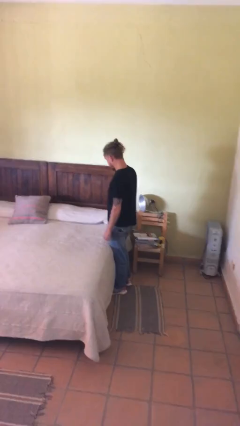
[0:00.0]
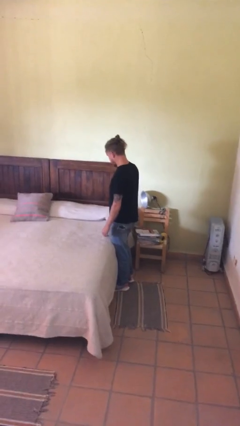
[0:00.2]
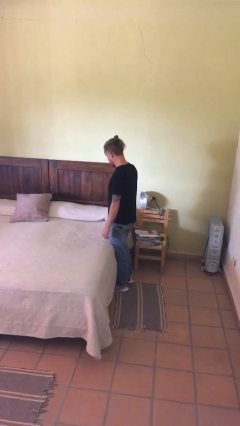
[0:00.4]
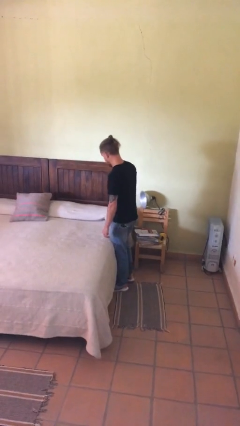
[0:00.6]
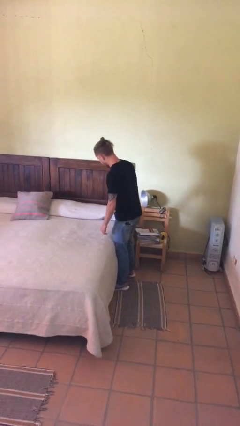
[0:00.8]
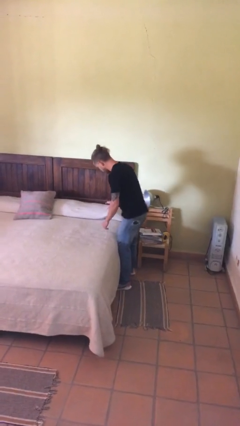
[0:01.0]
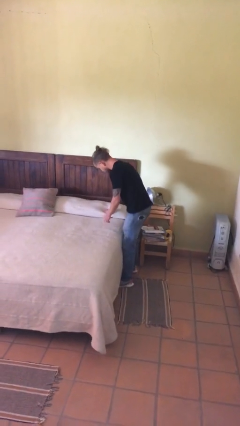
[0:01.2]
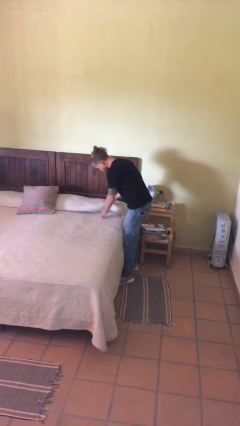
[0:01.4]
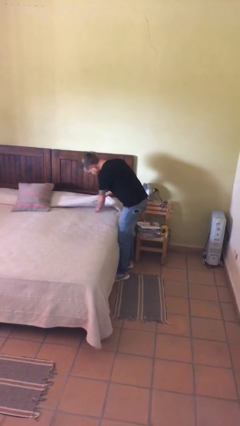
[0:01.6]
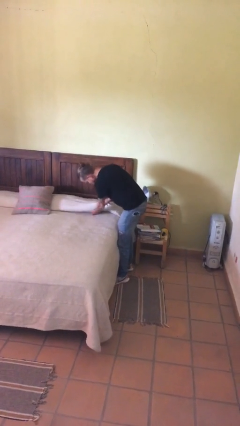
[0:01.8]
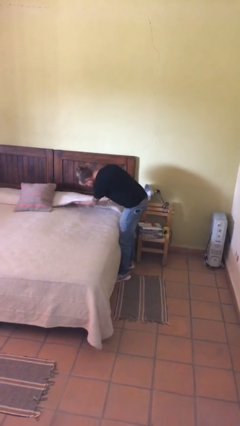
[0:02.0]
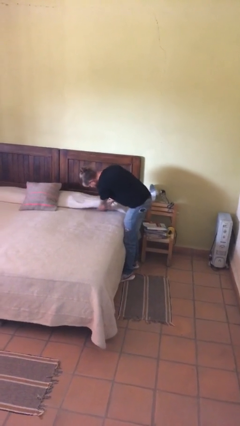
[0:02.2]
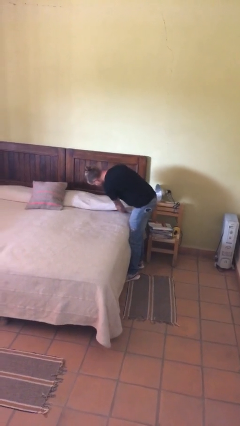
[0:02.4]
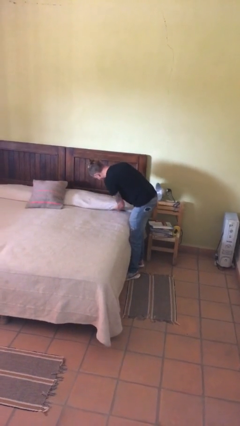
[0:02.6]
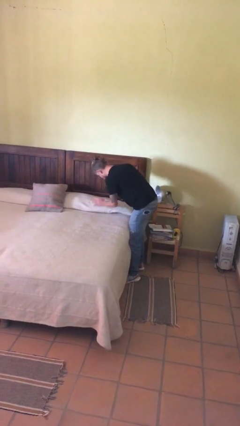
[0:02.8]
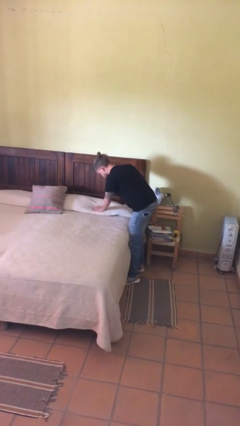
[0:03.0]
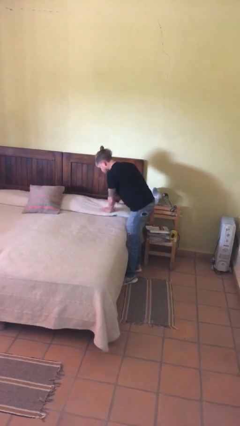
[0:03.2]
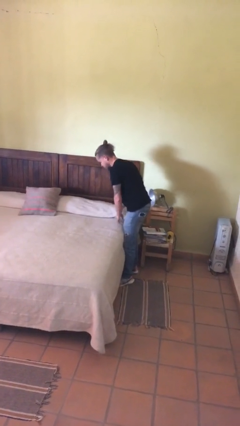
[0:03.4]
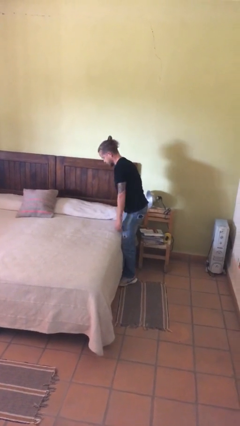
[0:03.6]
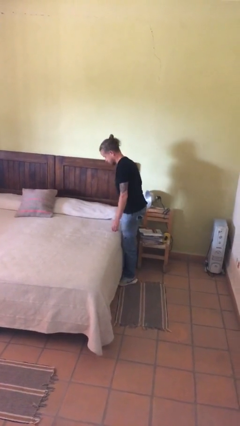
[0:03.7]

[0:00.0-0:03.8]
person searches in couch

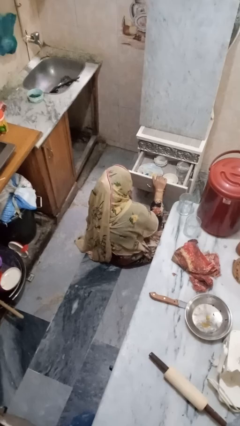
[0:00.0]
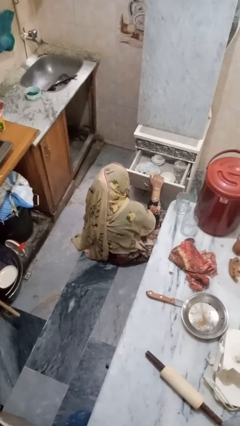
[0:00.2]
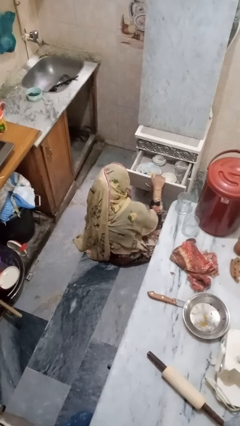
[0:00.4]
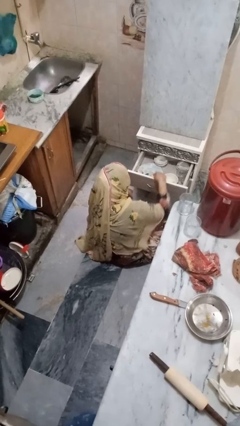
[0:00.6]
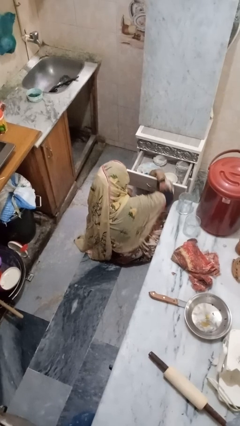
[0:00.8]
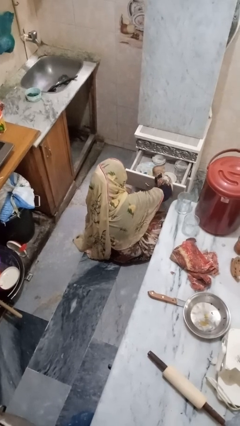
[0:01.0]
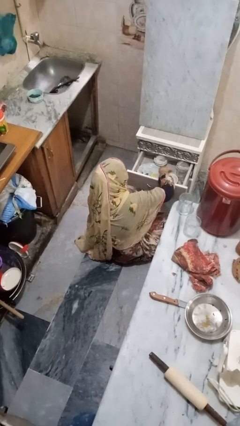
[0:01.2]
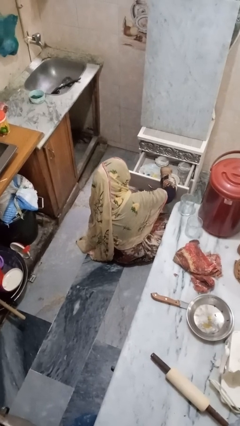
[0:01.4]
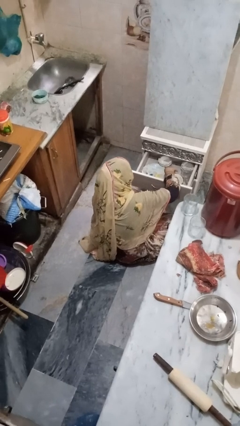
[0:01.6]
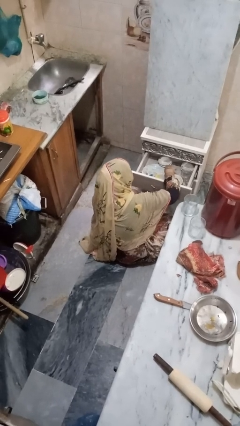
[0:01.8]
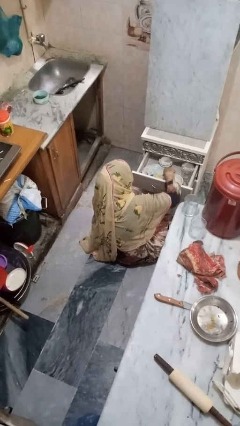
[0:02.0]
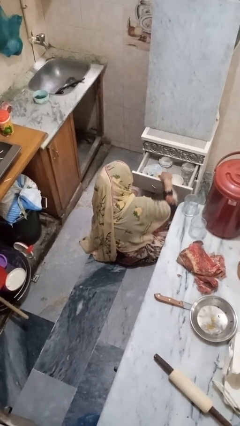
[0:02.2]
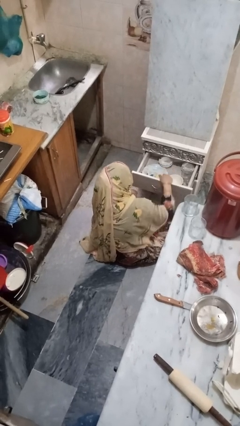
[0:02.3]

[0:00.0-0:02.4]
person searches in kitchen drawer

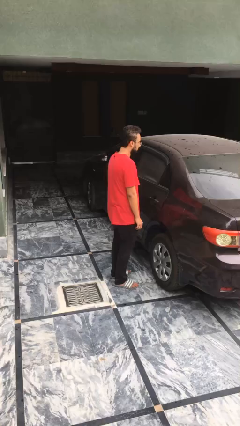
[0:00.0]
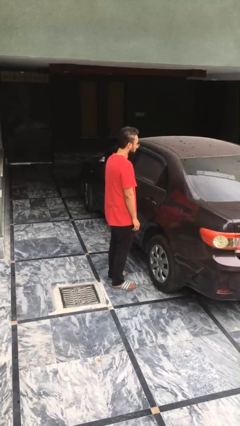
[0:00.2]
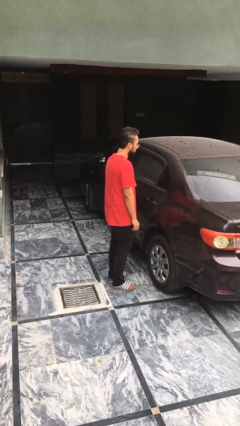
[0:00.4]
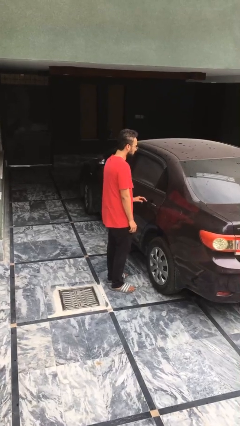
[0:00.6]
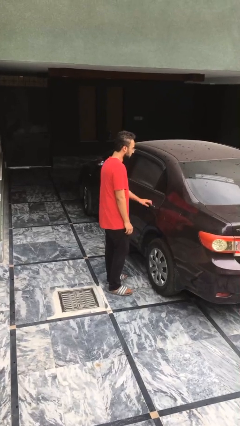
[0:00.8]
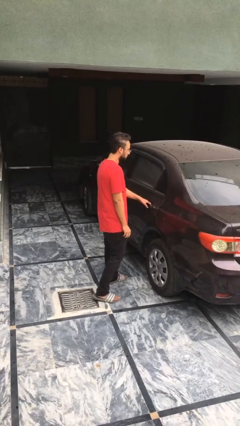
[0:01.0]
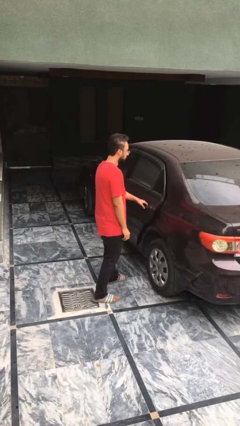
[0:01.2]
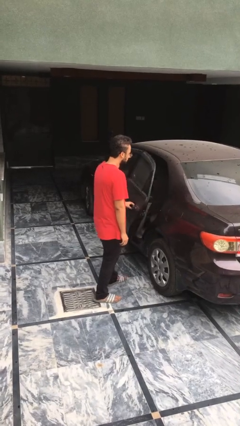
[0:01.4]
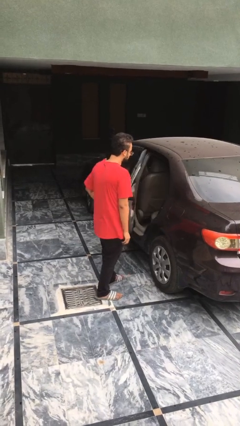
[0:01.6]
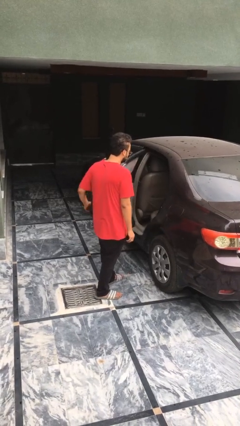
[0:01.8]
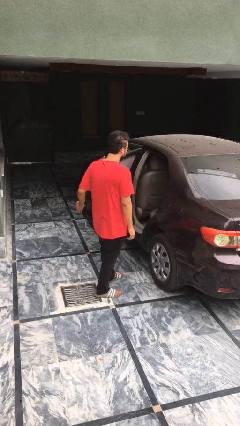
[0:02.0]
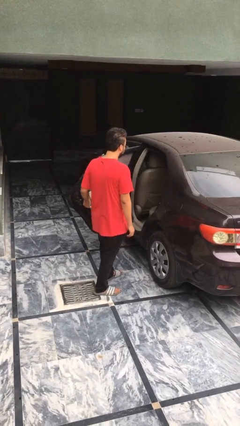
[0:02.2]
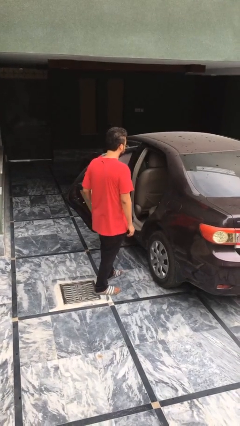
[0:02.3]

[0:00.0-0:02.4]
person opens car door

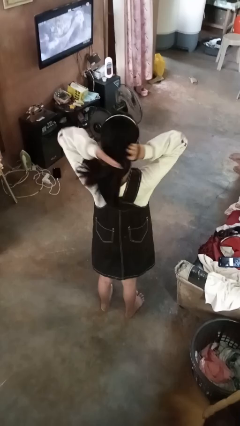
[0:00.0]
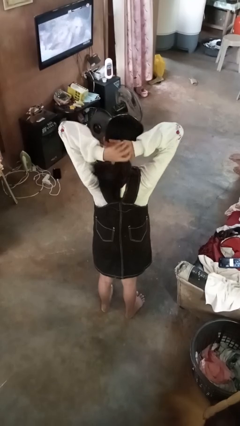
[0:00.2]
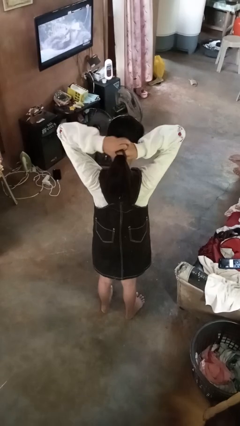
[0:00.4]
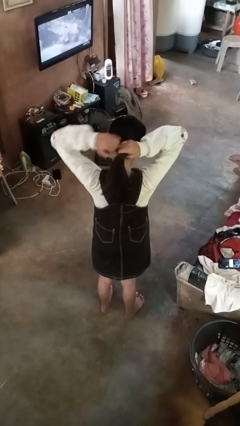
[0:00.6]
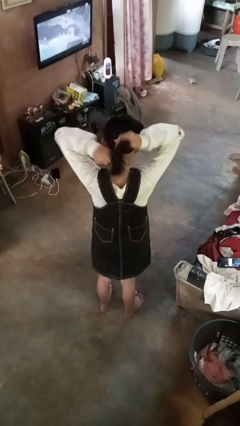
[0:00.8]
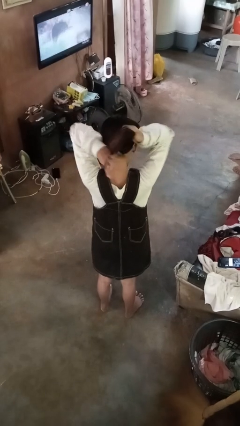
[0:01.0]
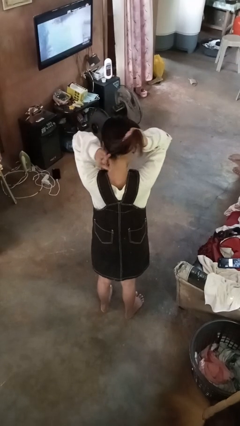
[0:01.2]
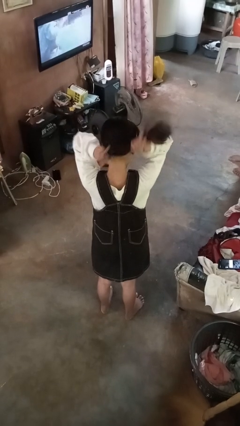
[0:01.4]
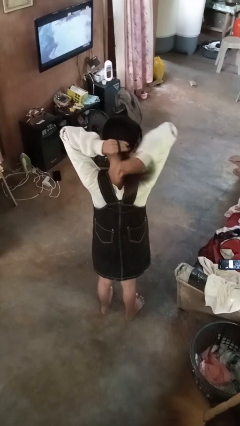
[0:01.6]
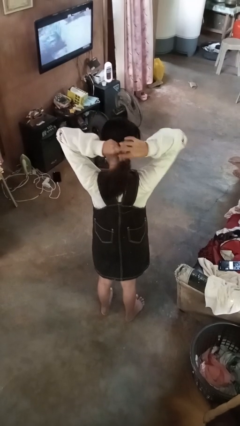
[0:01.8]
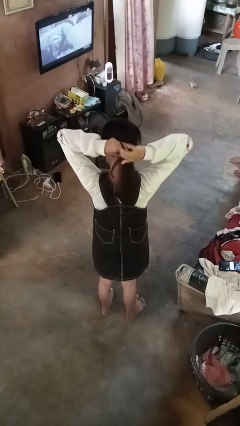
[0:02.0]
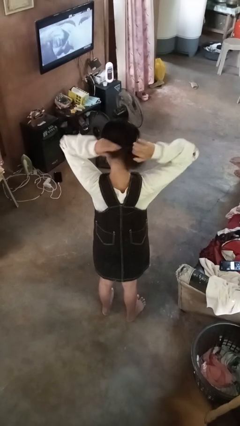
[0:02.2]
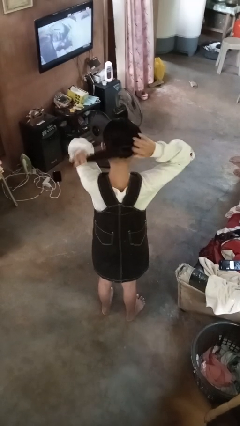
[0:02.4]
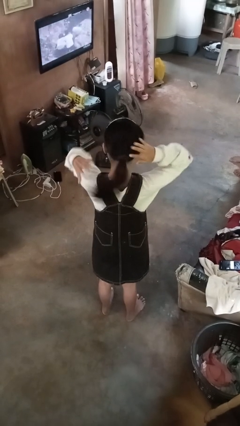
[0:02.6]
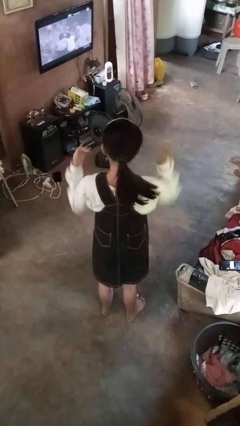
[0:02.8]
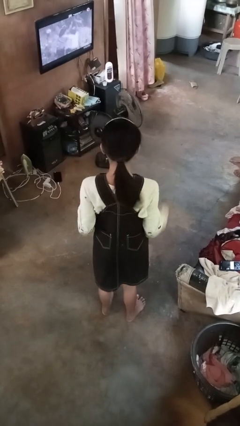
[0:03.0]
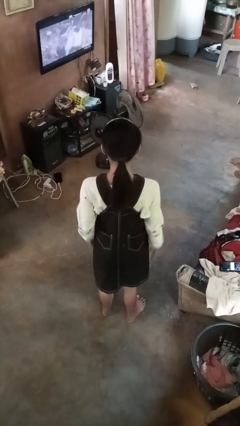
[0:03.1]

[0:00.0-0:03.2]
person puts hair in ponytail

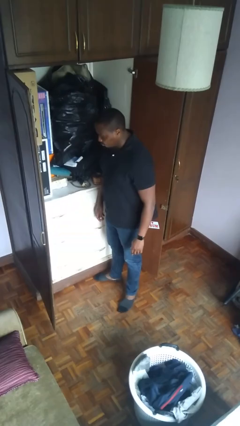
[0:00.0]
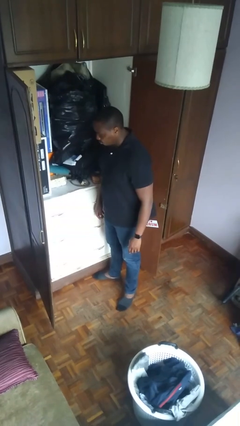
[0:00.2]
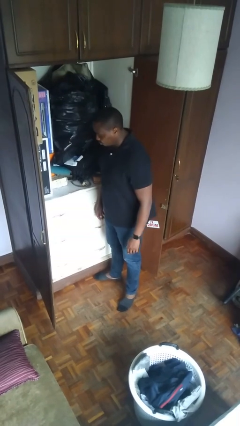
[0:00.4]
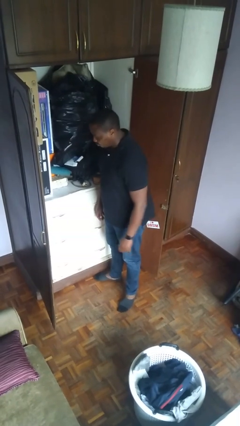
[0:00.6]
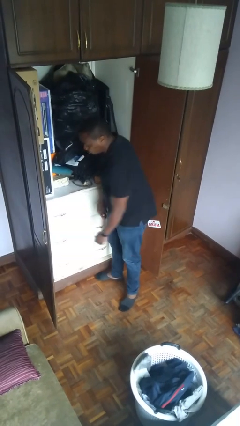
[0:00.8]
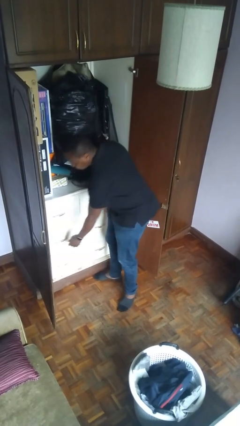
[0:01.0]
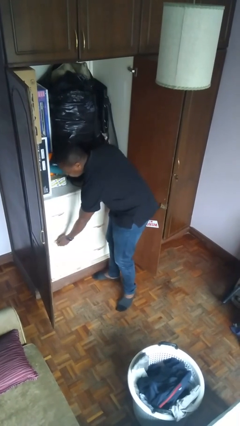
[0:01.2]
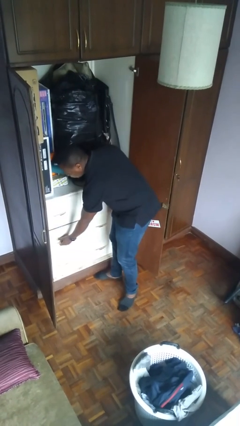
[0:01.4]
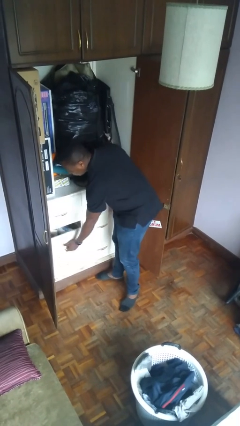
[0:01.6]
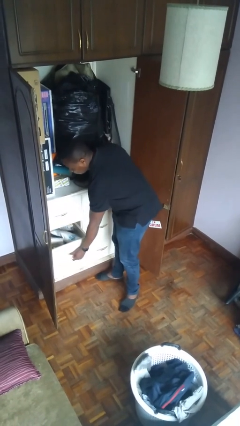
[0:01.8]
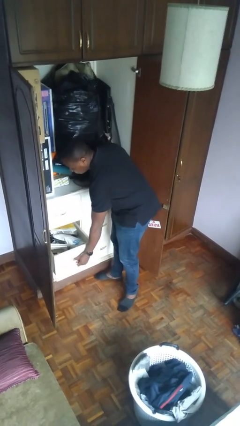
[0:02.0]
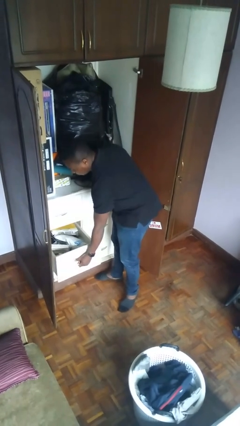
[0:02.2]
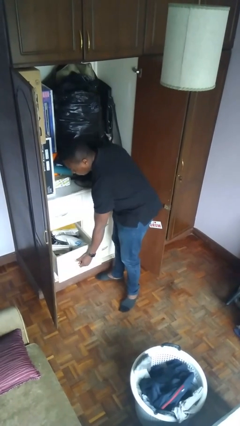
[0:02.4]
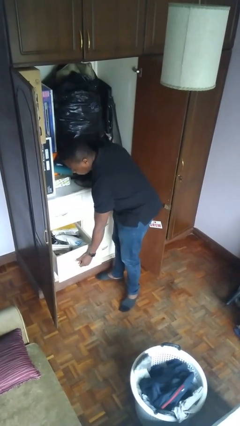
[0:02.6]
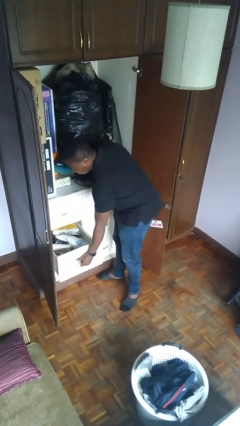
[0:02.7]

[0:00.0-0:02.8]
person opens dresser drawer

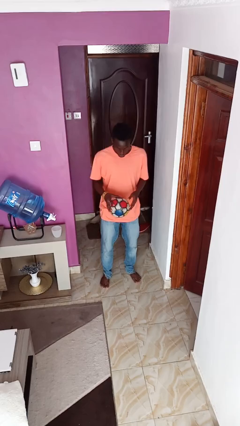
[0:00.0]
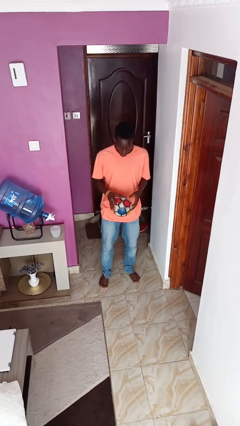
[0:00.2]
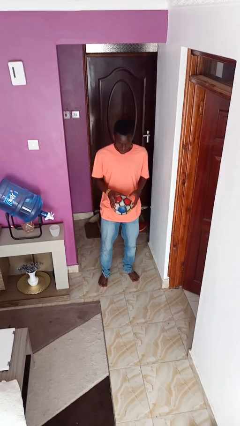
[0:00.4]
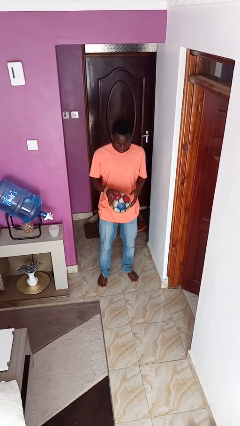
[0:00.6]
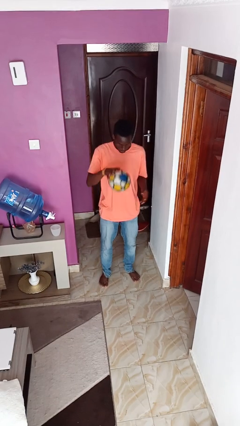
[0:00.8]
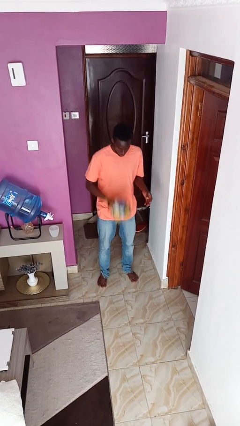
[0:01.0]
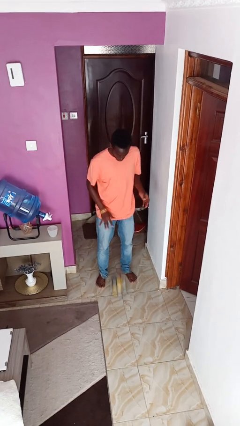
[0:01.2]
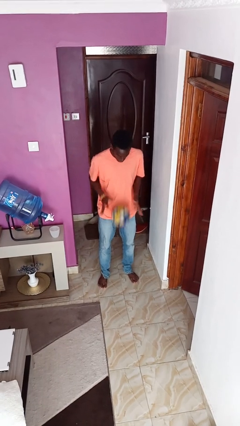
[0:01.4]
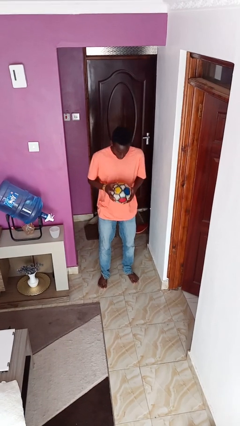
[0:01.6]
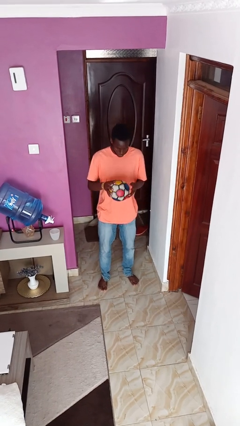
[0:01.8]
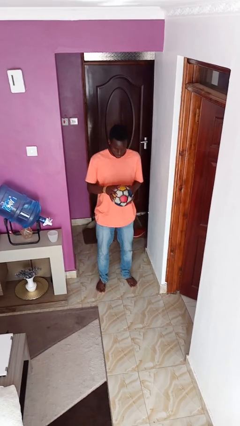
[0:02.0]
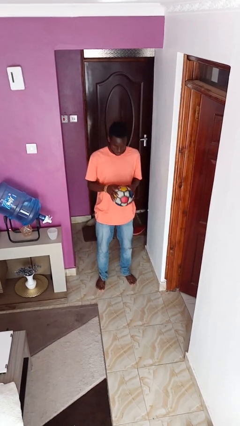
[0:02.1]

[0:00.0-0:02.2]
person bounces ball on floor

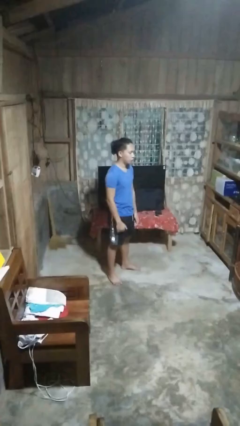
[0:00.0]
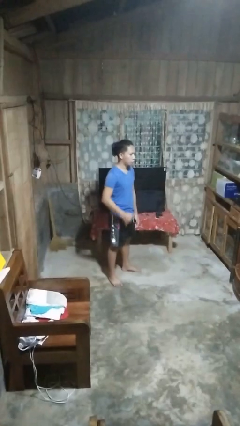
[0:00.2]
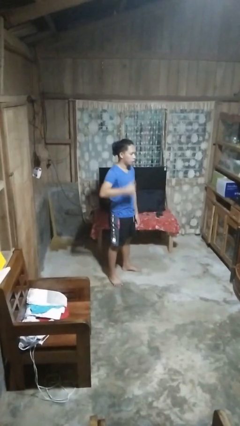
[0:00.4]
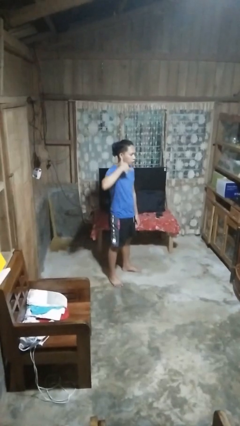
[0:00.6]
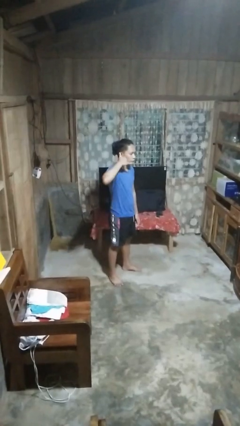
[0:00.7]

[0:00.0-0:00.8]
person gestures call me
